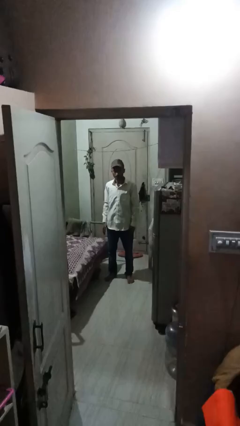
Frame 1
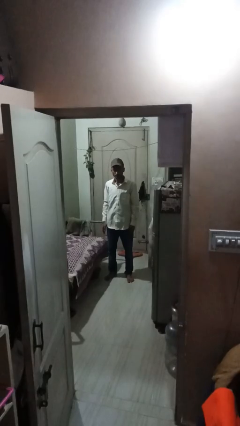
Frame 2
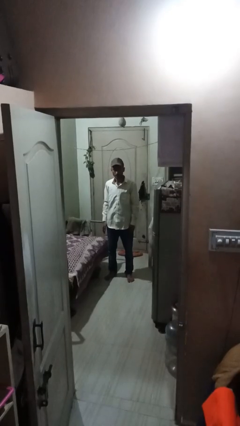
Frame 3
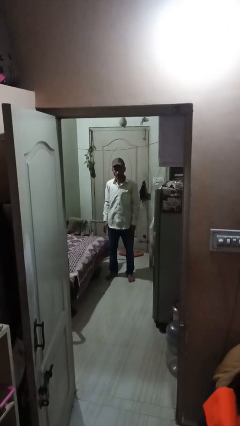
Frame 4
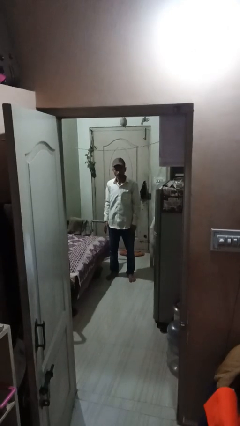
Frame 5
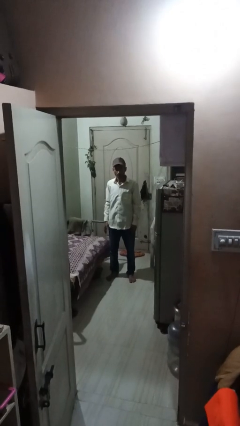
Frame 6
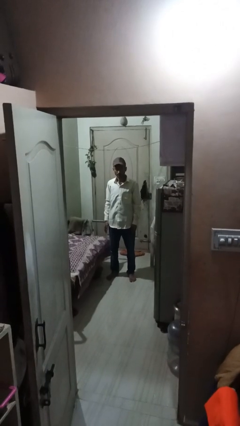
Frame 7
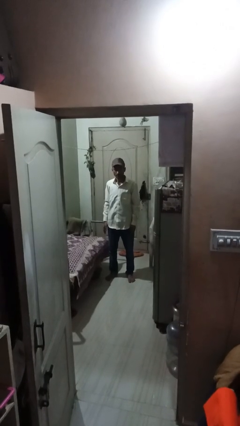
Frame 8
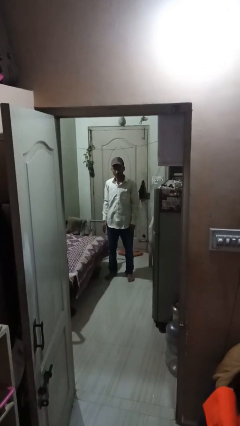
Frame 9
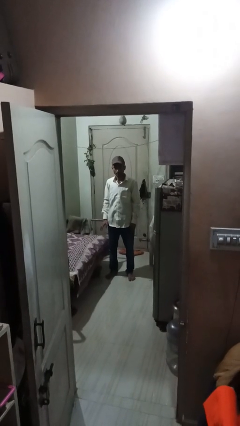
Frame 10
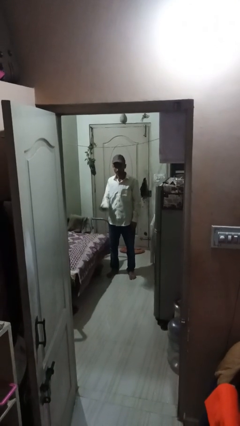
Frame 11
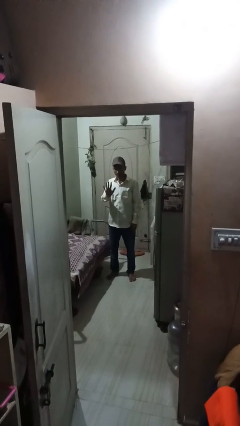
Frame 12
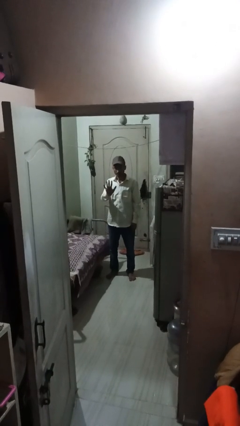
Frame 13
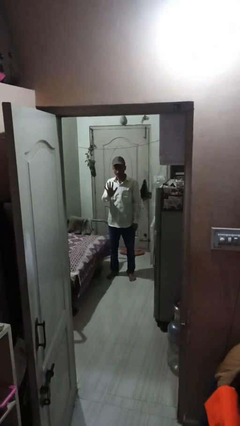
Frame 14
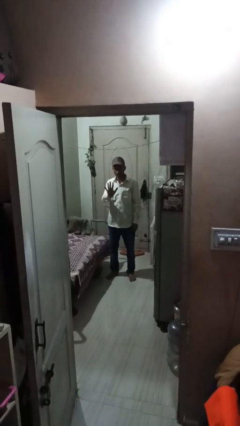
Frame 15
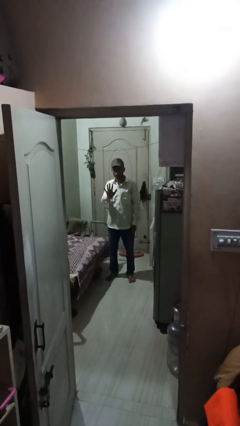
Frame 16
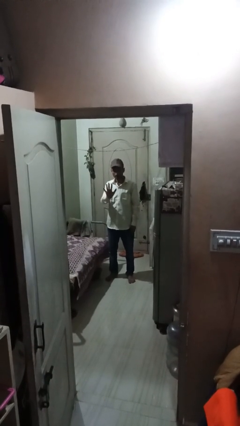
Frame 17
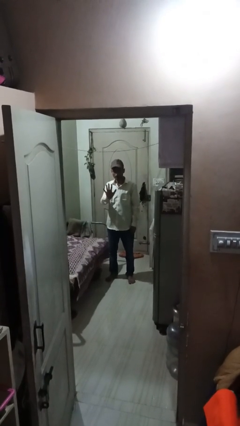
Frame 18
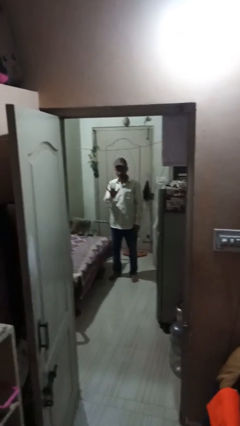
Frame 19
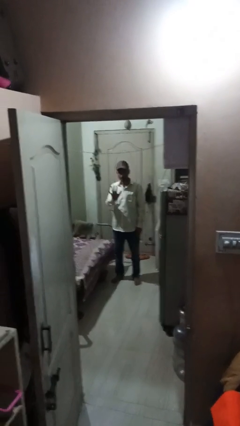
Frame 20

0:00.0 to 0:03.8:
person gestures number five

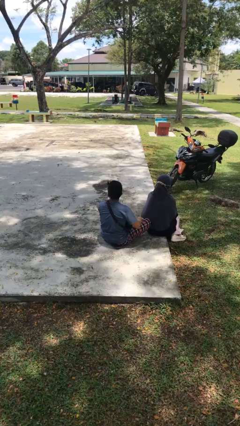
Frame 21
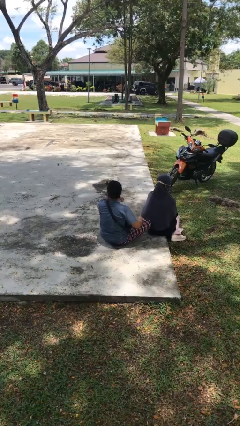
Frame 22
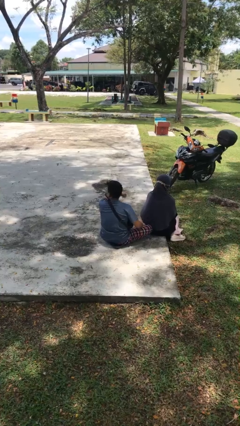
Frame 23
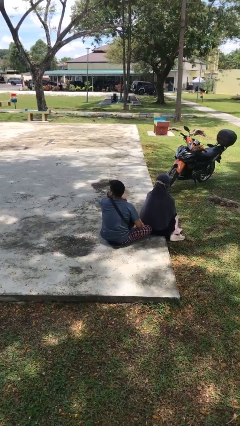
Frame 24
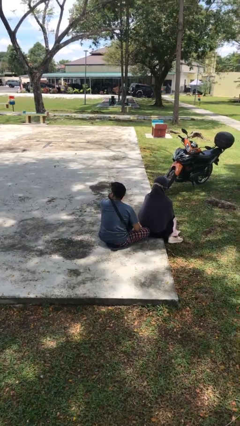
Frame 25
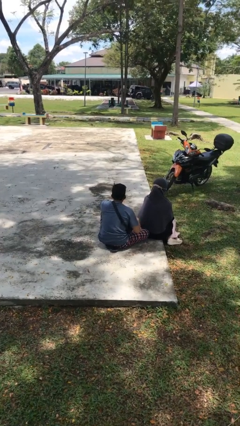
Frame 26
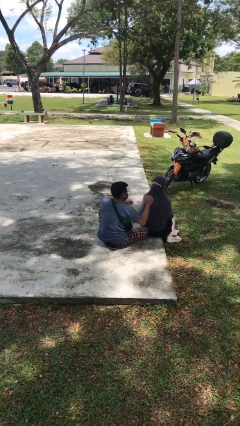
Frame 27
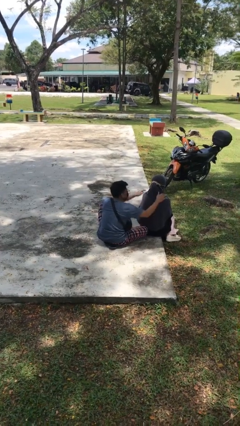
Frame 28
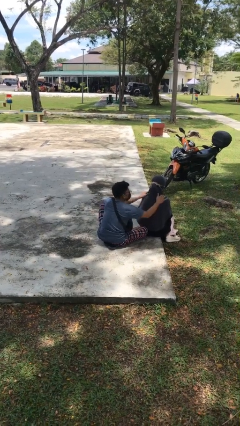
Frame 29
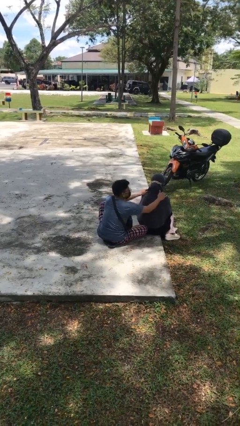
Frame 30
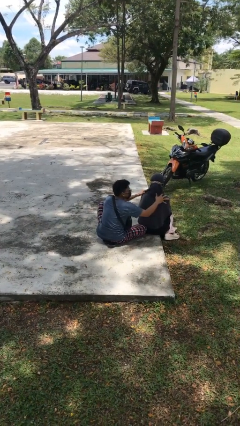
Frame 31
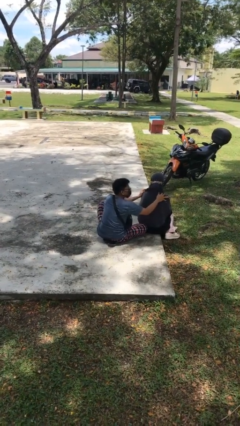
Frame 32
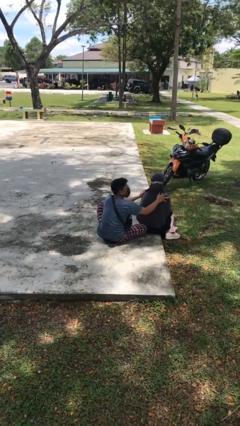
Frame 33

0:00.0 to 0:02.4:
person pounds shoulders of person

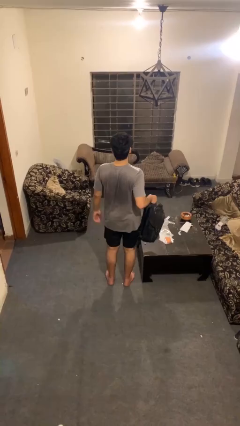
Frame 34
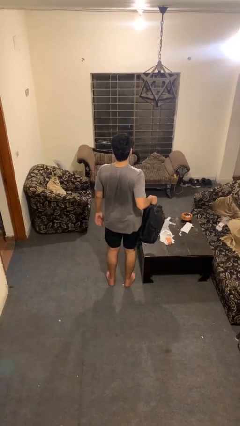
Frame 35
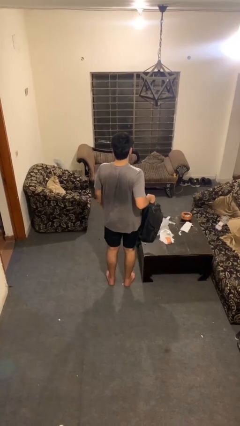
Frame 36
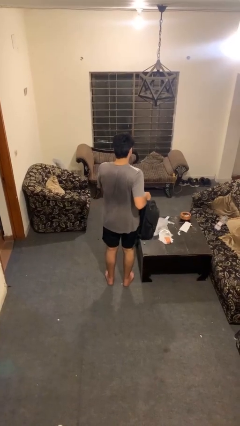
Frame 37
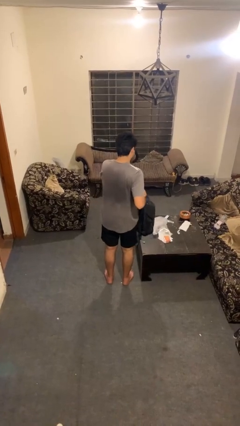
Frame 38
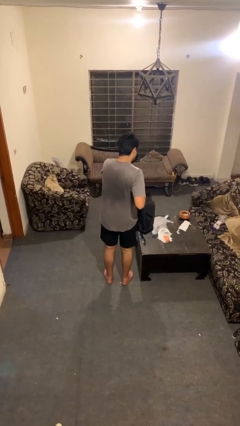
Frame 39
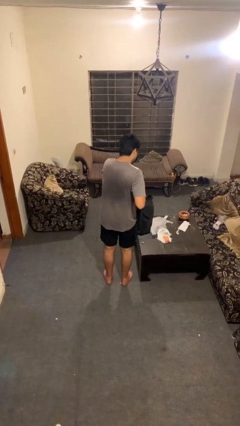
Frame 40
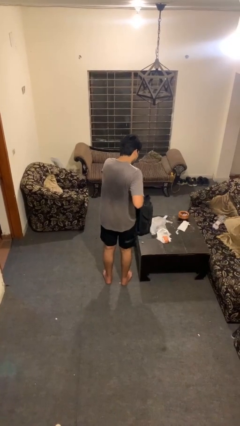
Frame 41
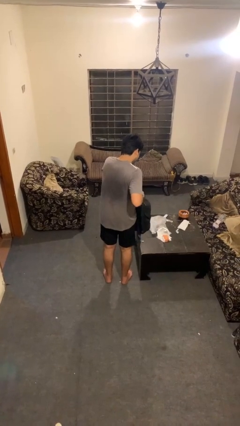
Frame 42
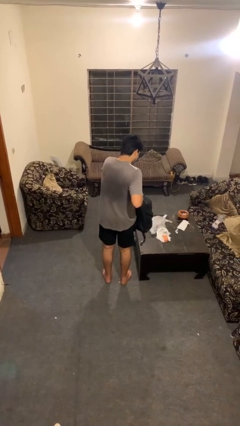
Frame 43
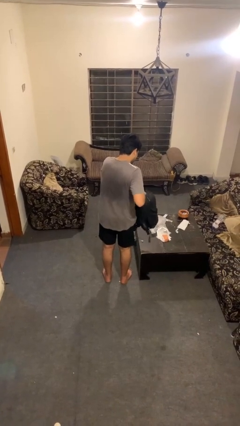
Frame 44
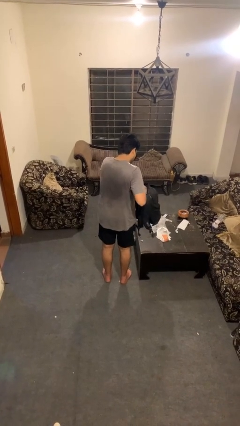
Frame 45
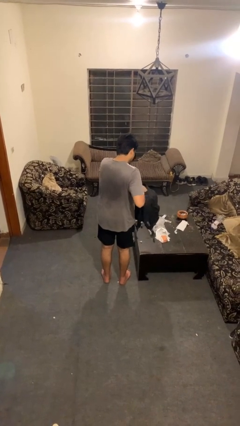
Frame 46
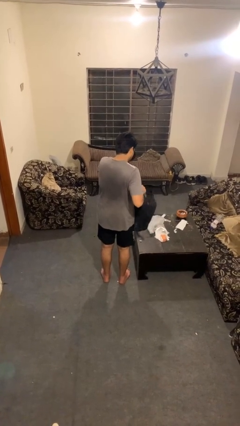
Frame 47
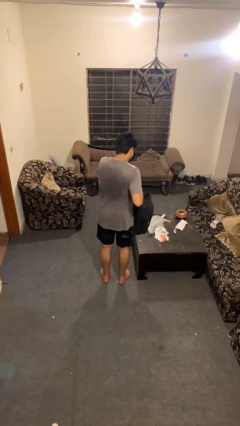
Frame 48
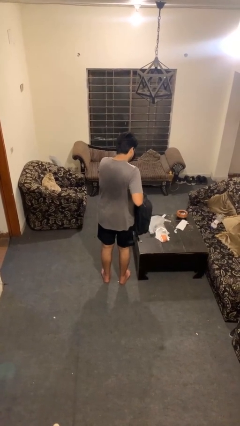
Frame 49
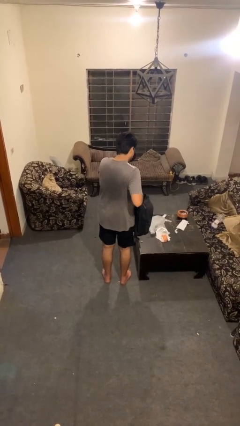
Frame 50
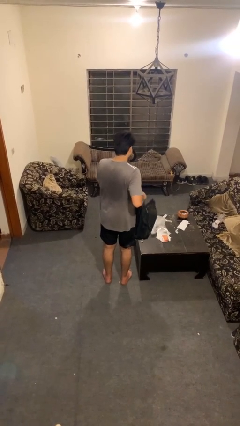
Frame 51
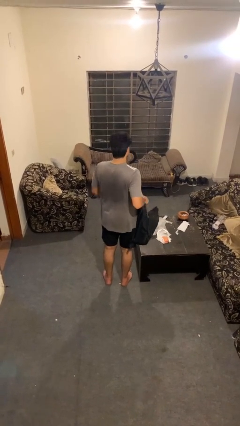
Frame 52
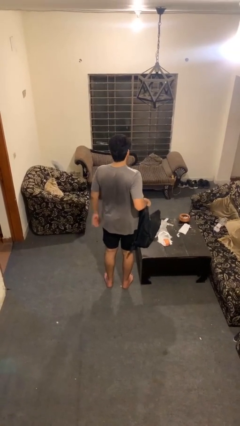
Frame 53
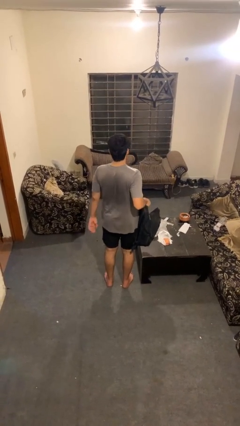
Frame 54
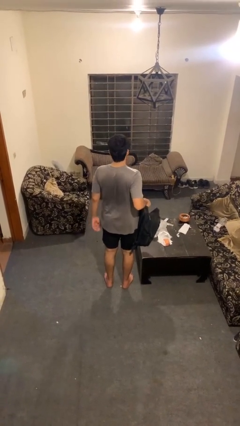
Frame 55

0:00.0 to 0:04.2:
person searches in bag

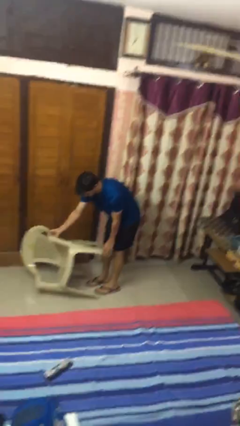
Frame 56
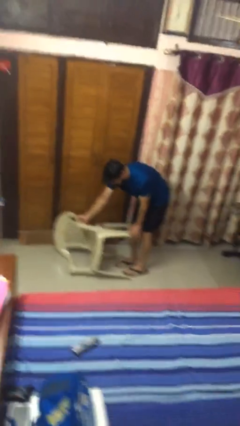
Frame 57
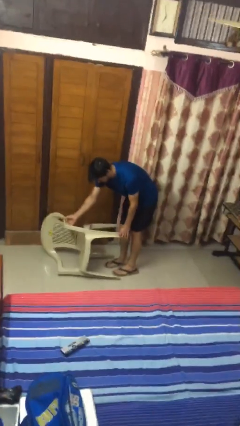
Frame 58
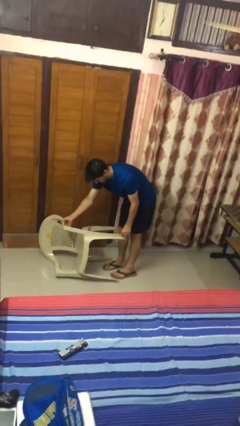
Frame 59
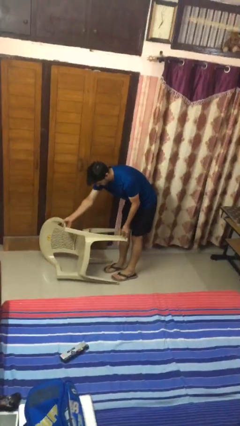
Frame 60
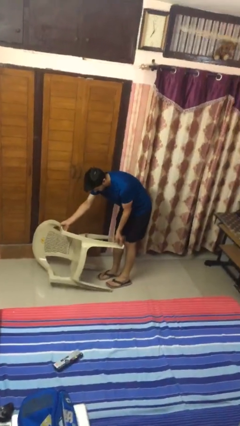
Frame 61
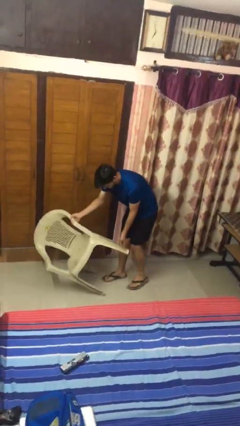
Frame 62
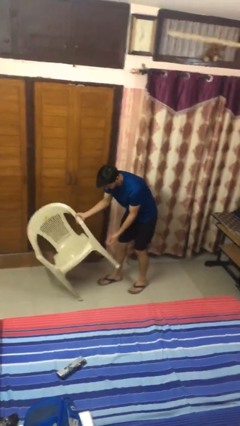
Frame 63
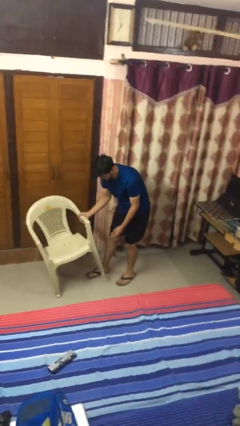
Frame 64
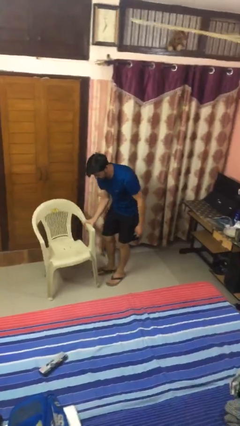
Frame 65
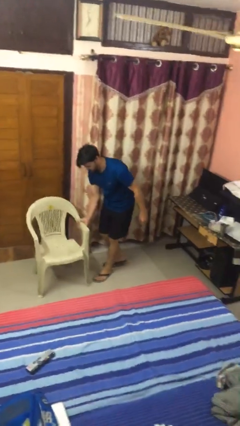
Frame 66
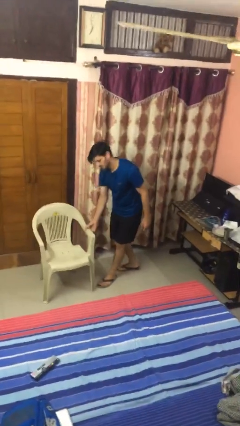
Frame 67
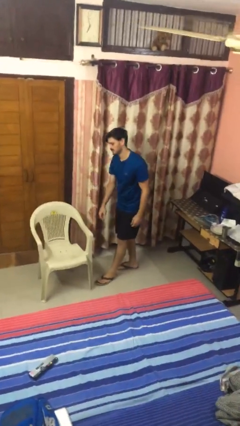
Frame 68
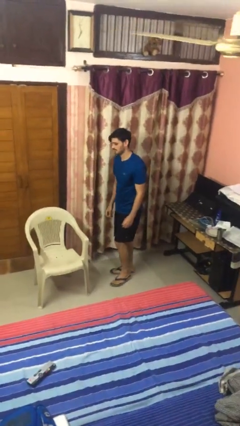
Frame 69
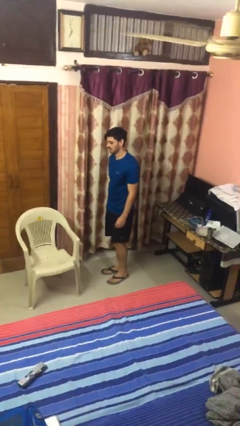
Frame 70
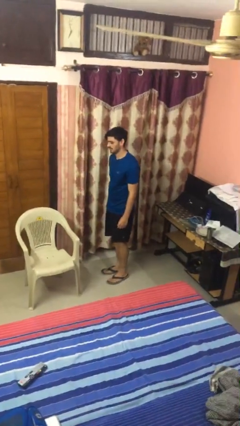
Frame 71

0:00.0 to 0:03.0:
person sets upright furniture

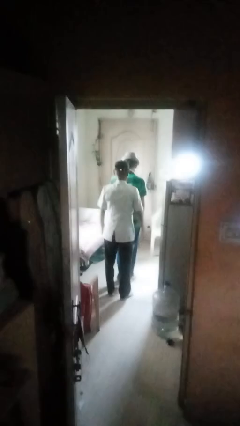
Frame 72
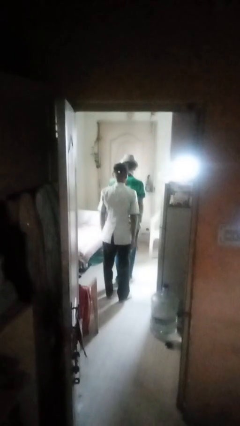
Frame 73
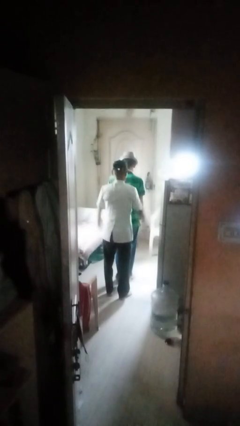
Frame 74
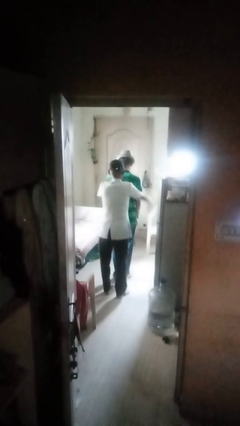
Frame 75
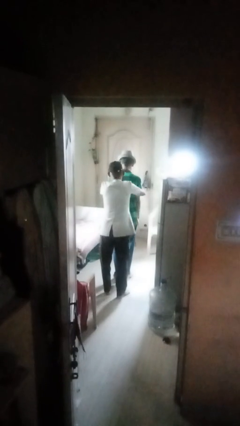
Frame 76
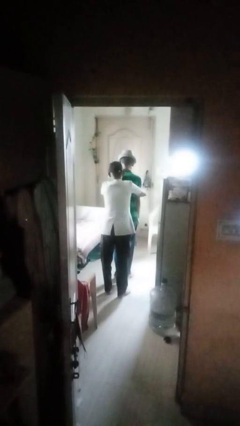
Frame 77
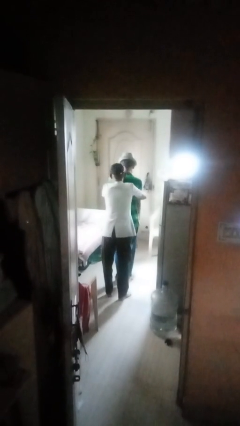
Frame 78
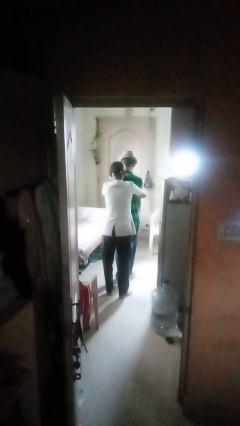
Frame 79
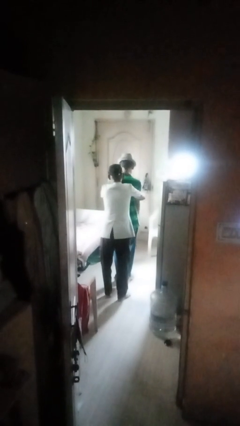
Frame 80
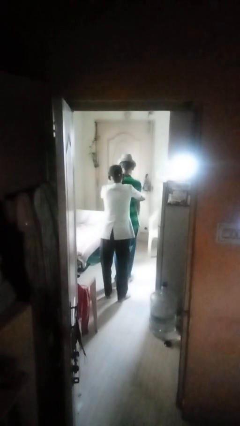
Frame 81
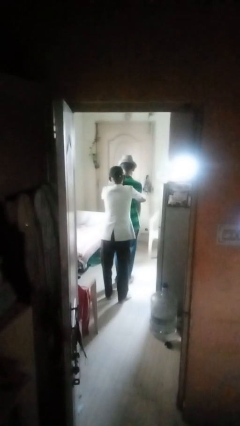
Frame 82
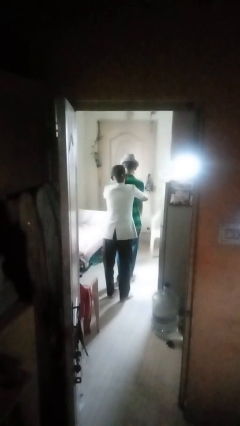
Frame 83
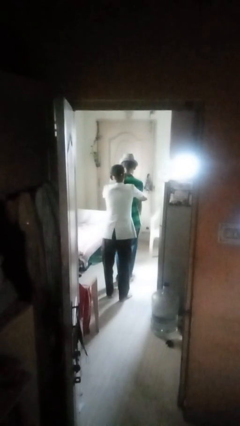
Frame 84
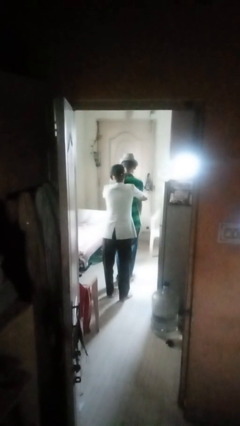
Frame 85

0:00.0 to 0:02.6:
person hugs person from behind

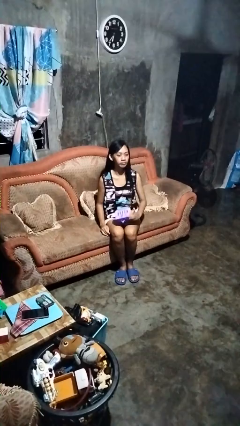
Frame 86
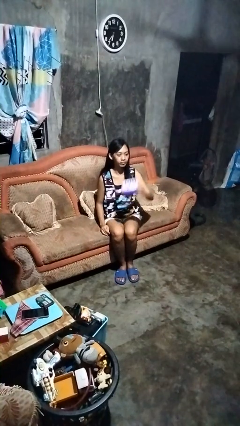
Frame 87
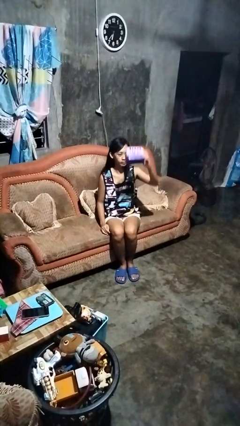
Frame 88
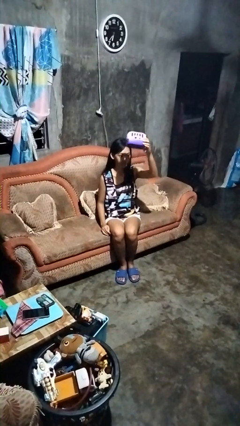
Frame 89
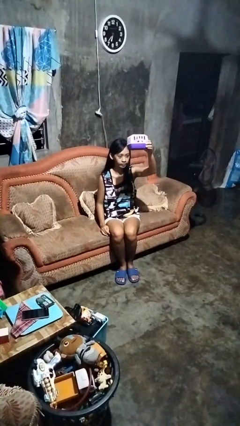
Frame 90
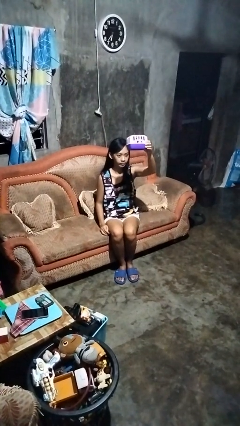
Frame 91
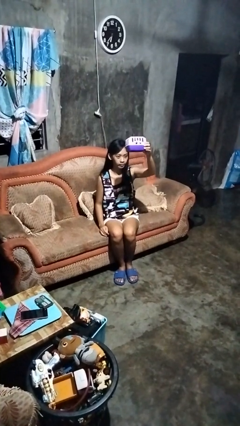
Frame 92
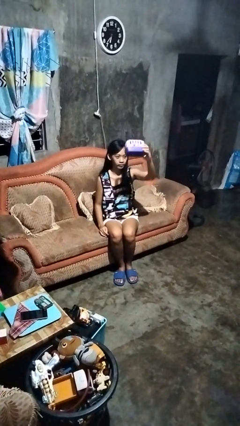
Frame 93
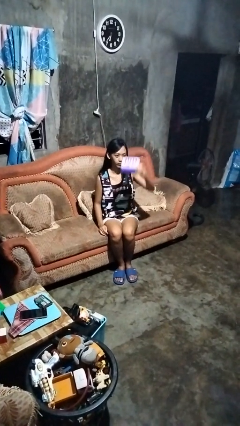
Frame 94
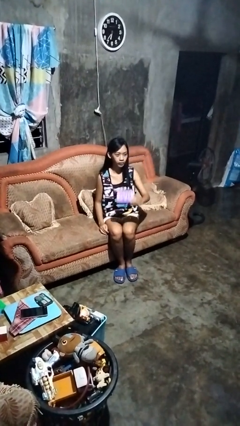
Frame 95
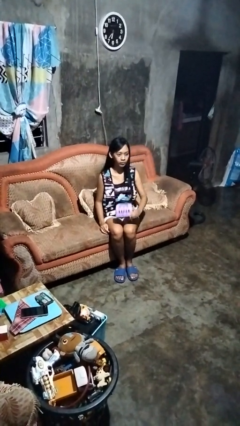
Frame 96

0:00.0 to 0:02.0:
person holds object above head
